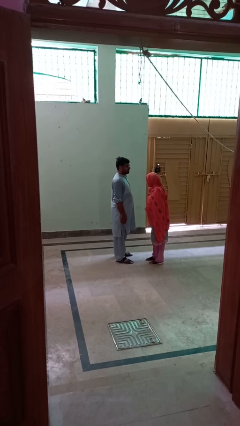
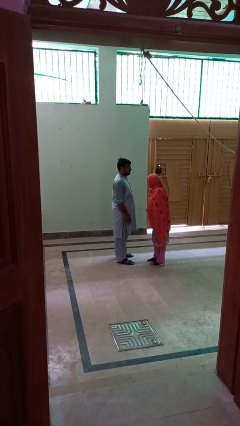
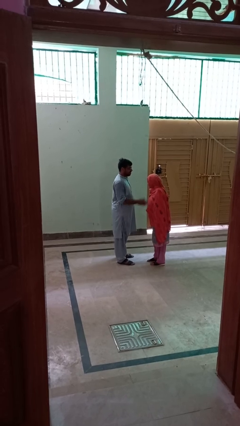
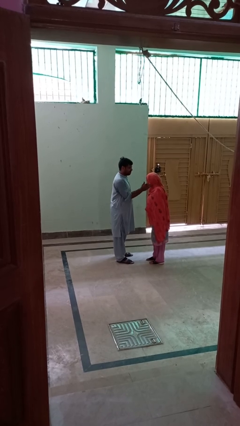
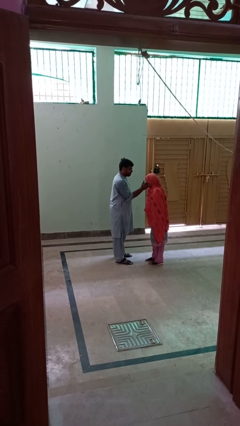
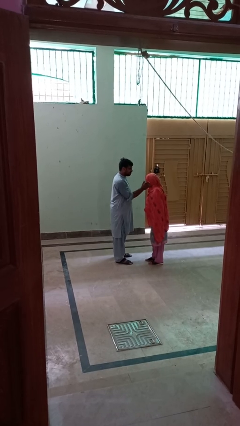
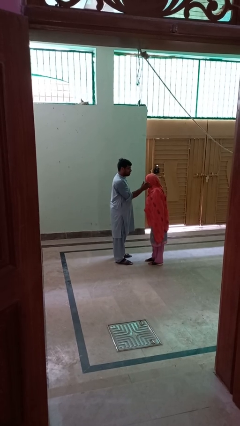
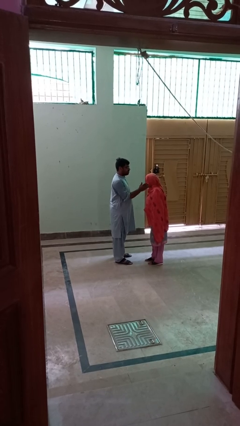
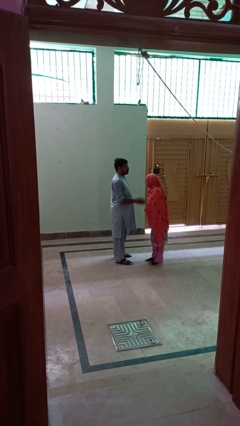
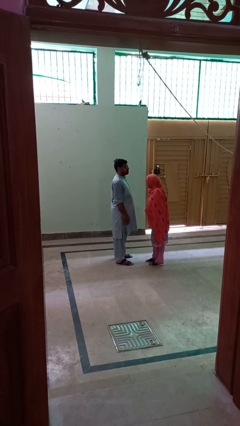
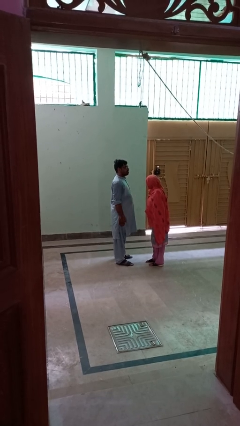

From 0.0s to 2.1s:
person touches face of person

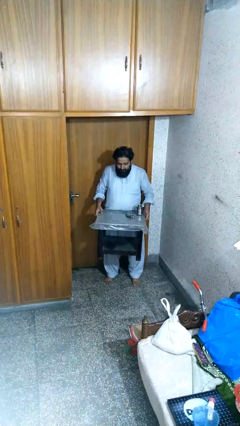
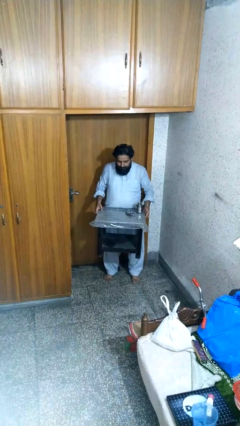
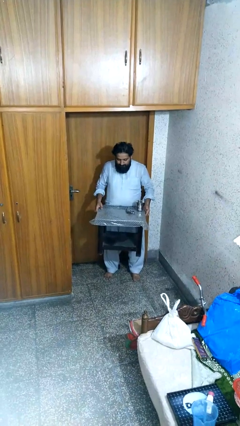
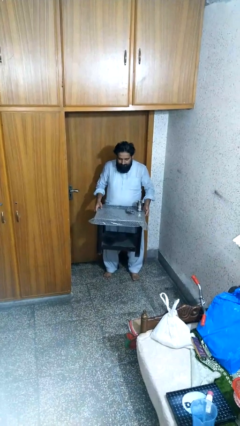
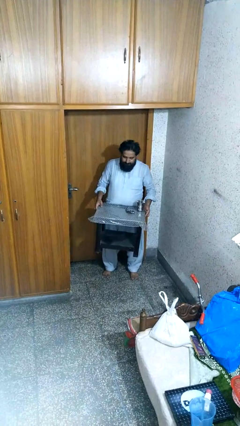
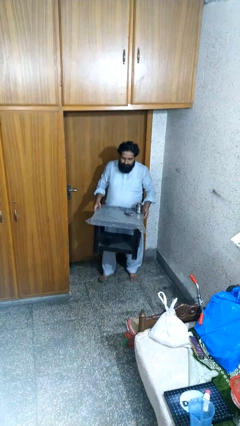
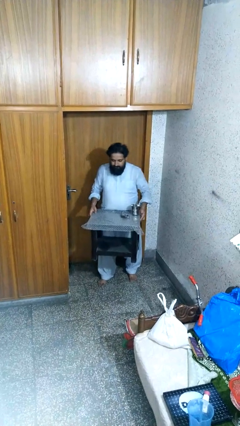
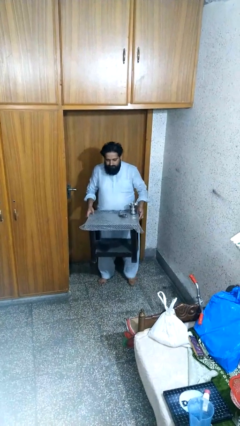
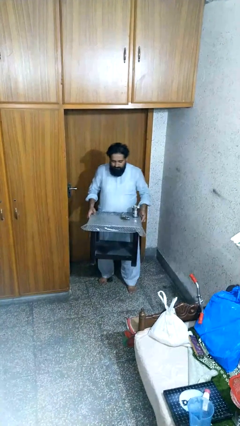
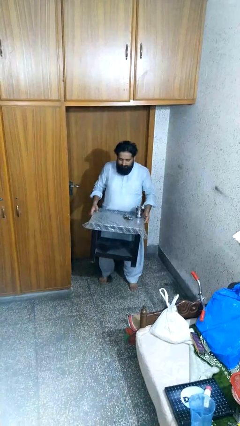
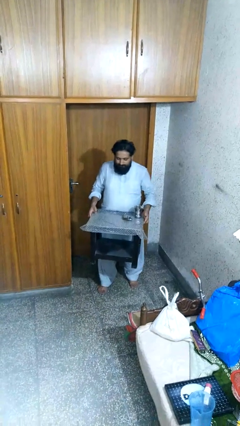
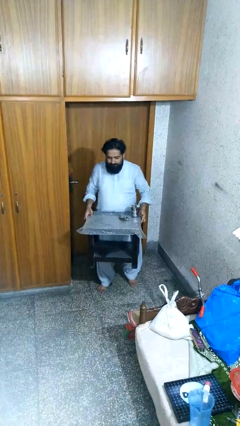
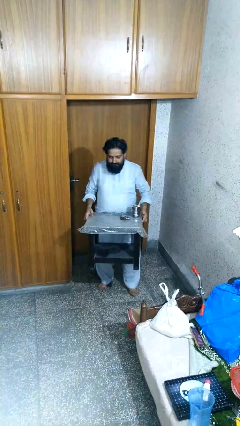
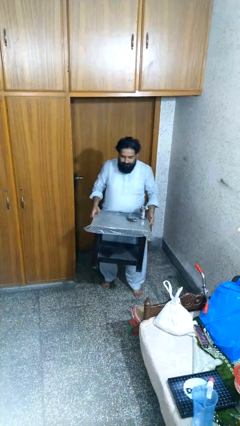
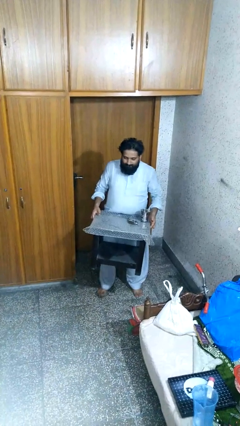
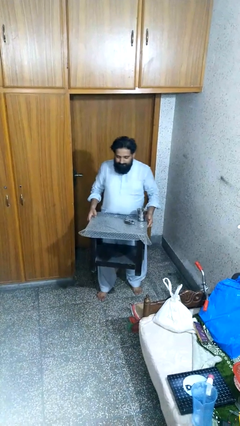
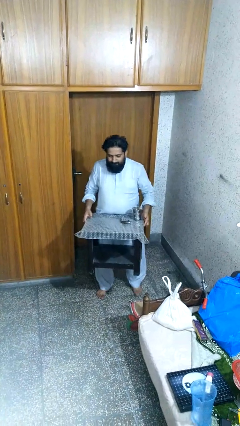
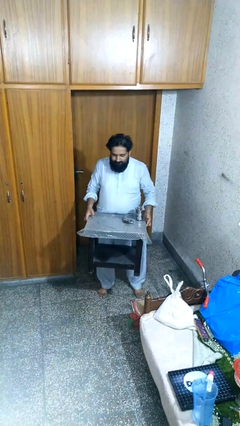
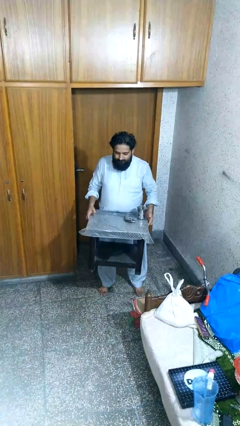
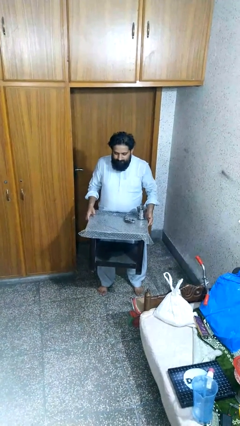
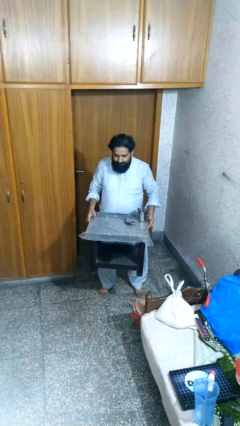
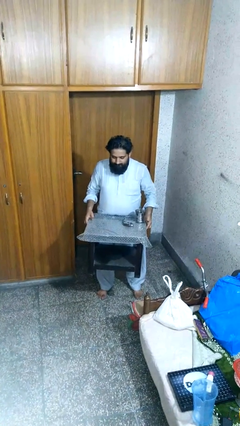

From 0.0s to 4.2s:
person carries furniture

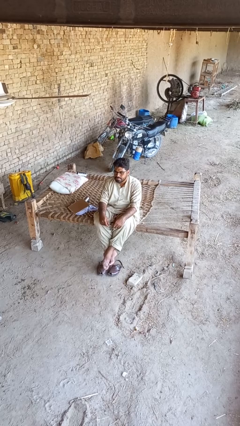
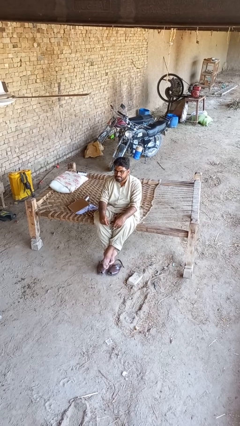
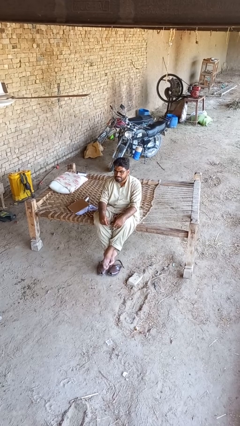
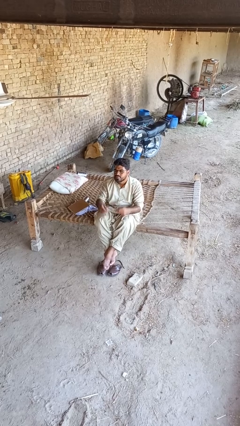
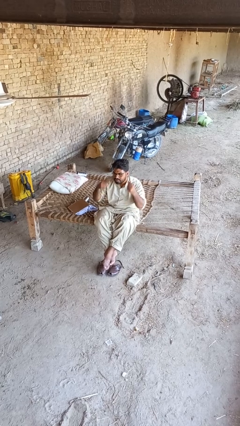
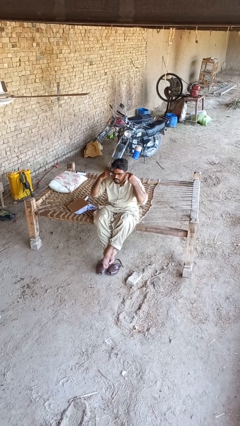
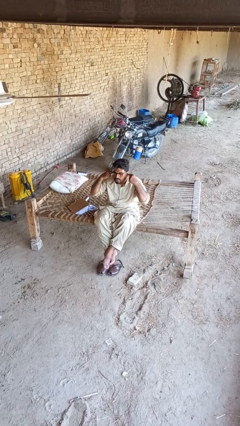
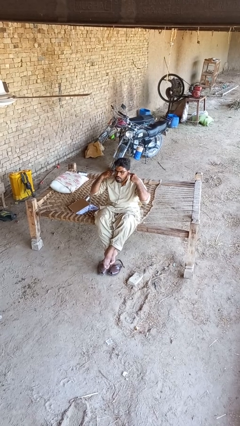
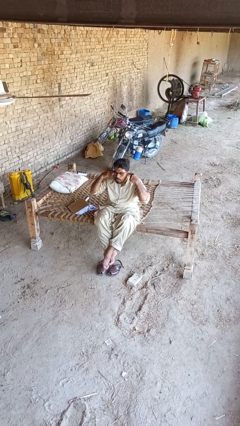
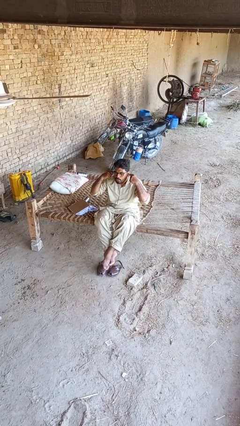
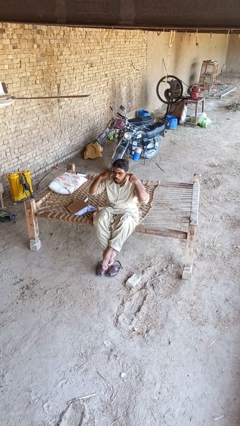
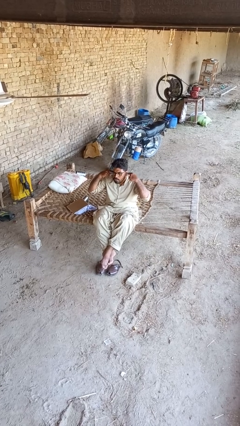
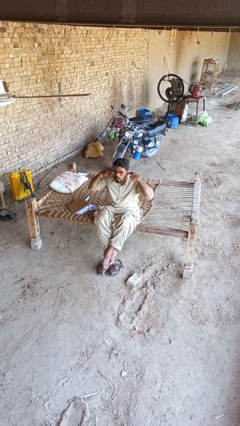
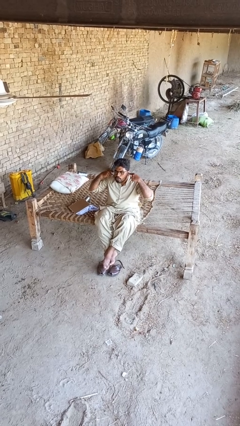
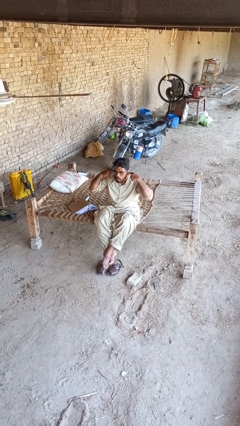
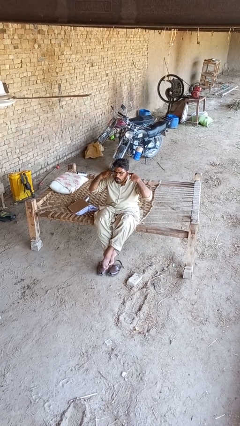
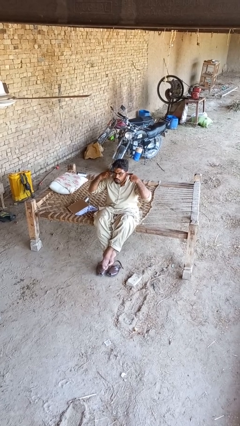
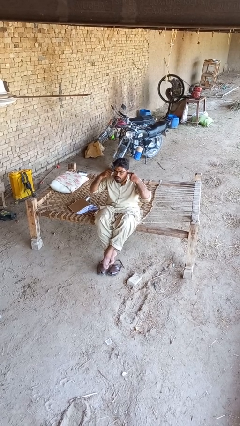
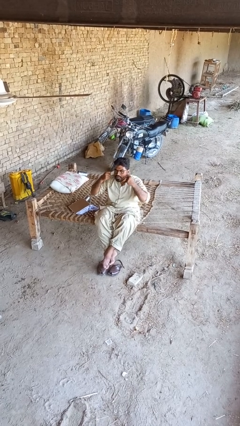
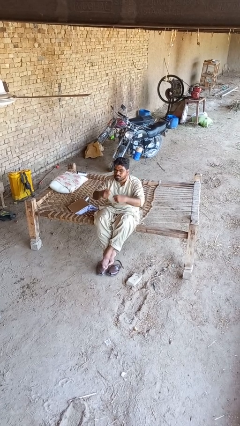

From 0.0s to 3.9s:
person puts fingers in ear

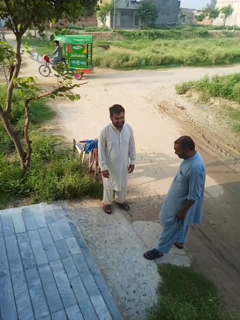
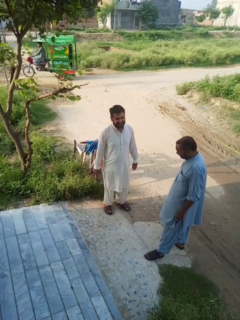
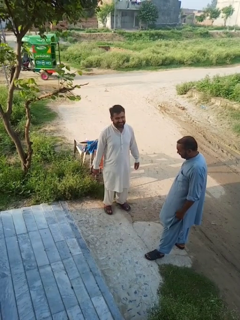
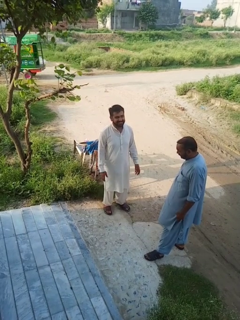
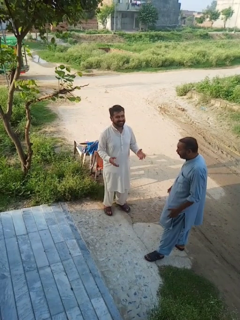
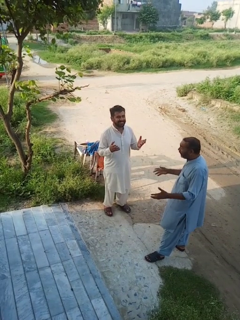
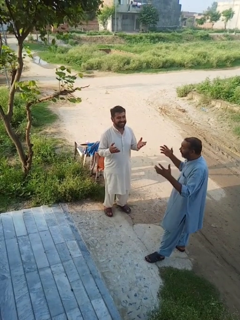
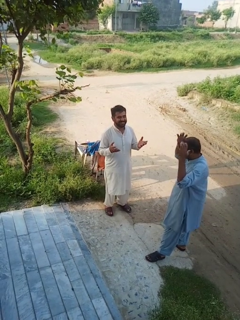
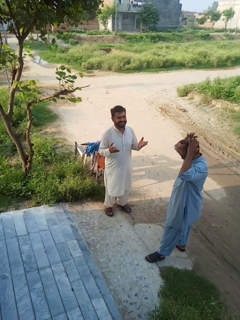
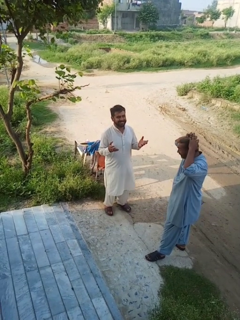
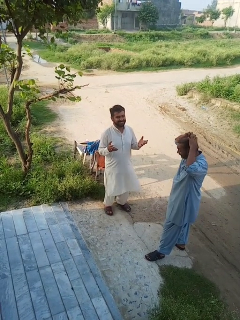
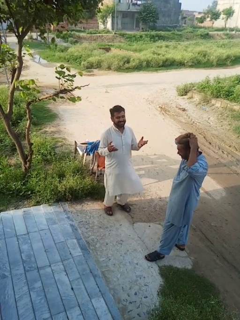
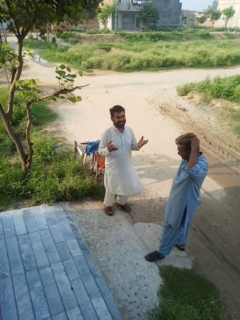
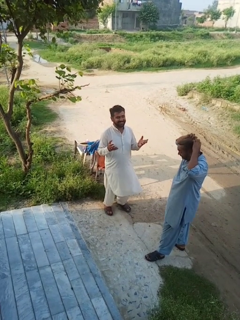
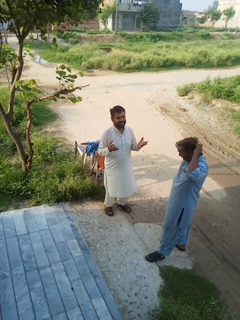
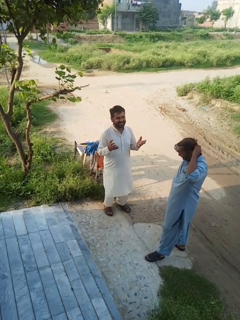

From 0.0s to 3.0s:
person laughs with person

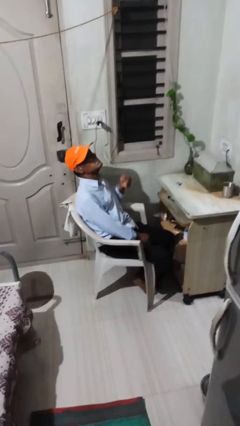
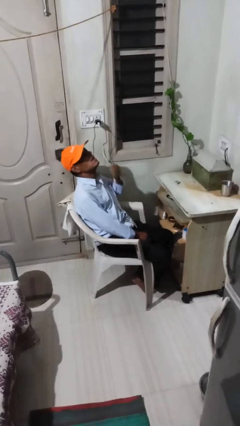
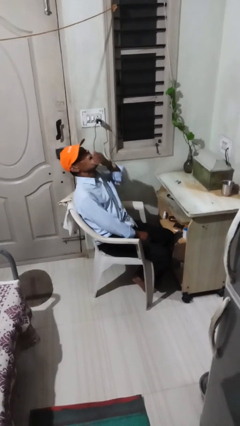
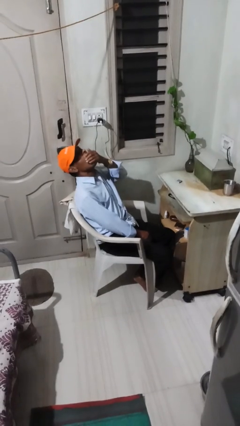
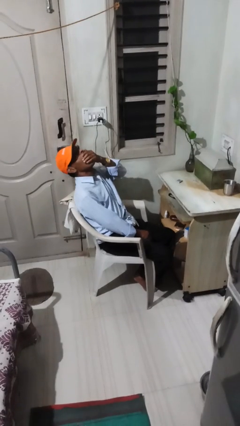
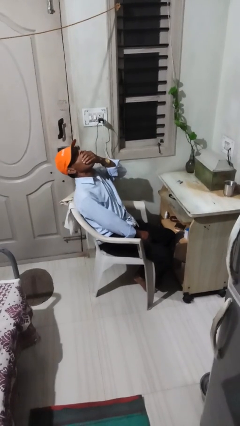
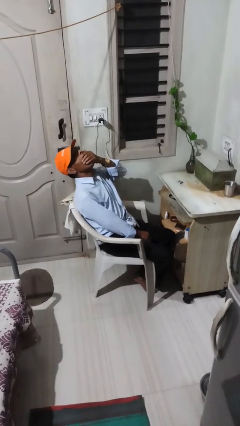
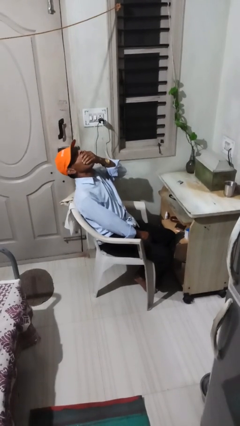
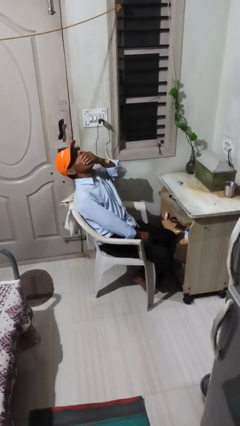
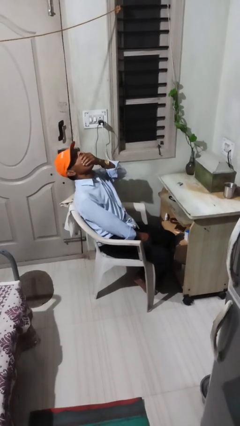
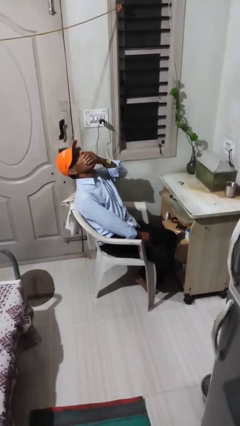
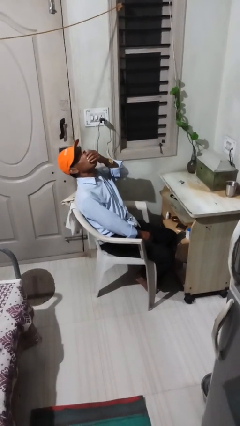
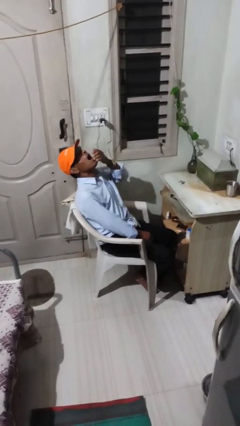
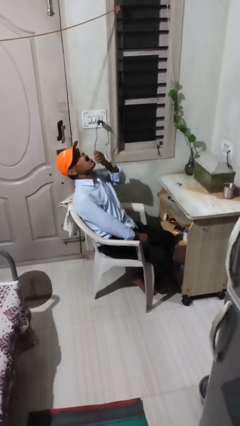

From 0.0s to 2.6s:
person yawns

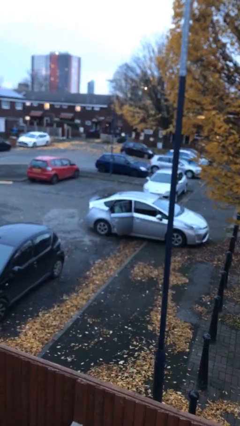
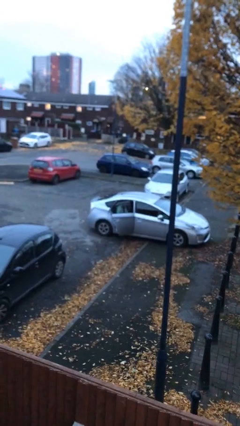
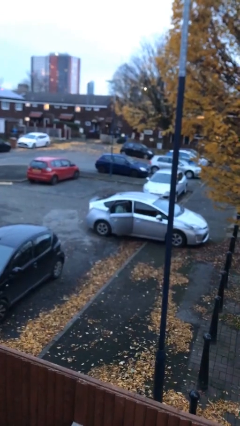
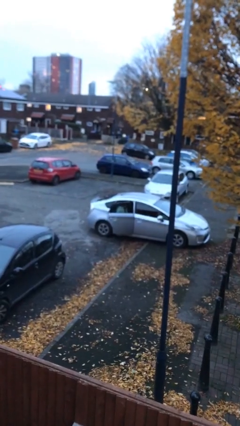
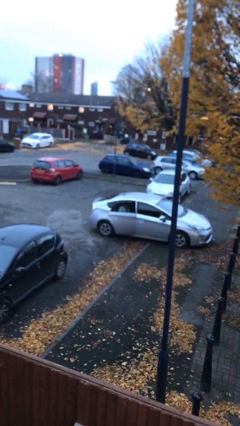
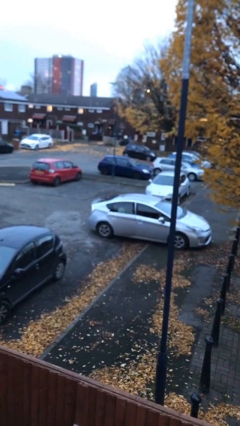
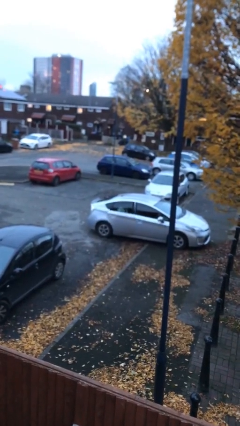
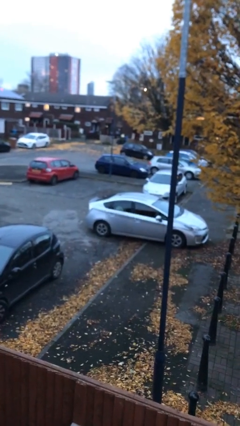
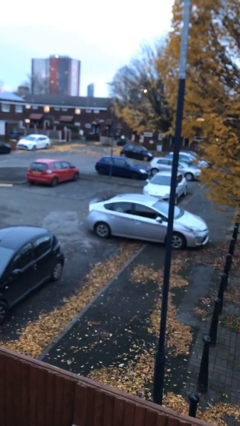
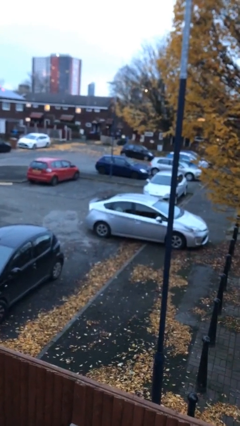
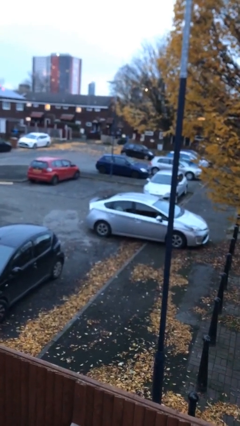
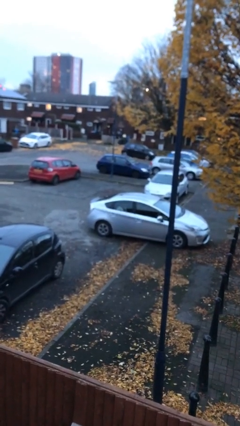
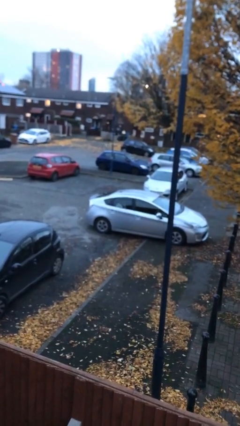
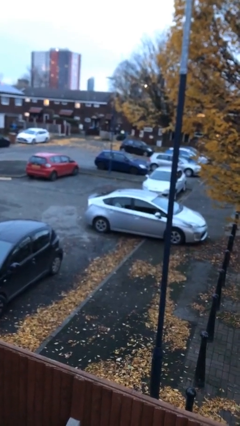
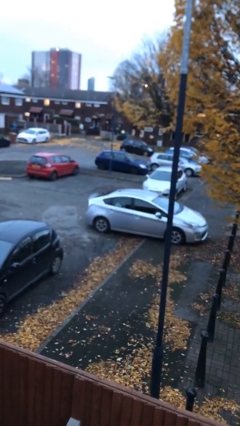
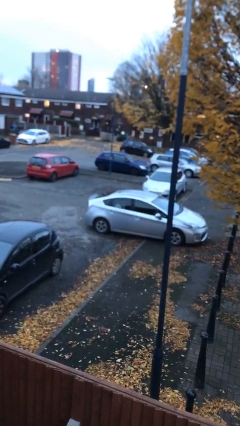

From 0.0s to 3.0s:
person closes car door
